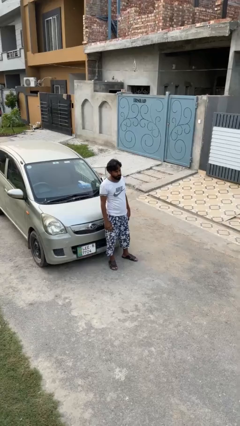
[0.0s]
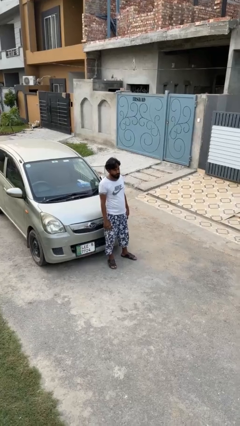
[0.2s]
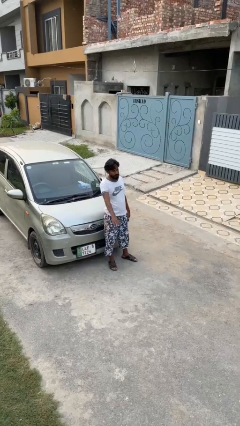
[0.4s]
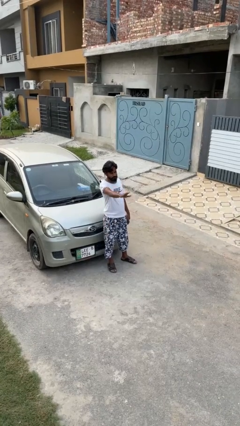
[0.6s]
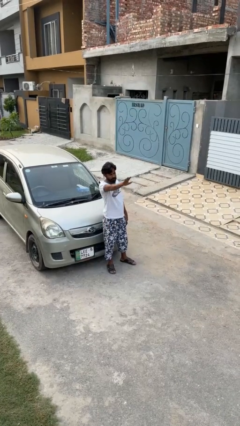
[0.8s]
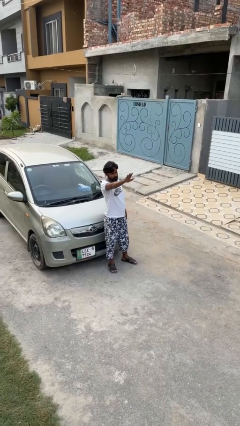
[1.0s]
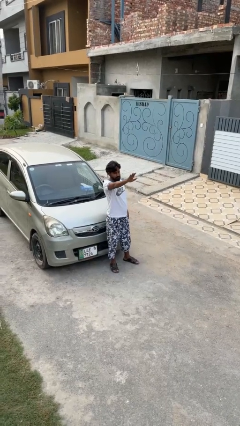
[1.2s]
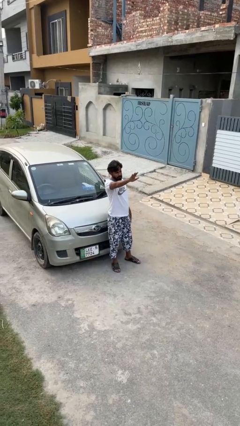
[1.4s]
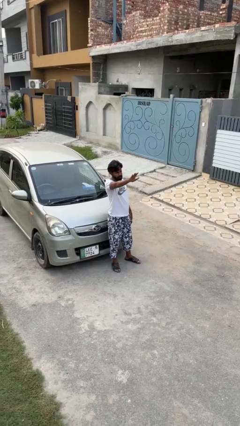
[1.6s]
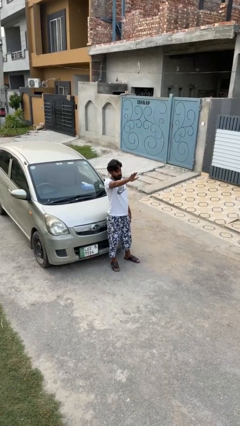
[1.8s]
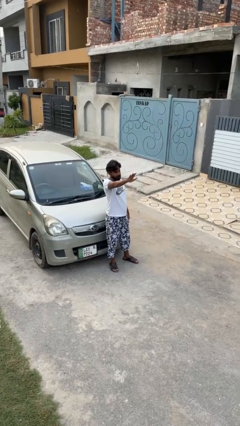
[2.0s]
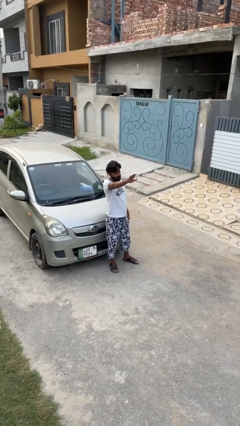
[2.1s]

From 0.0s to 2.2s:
person gestures raise hand

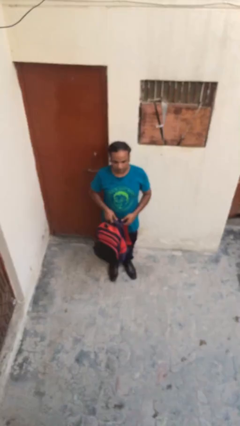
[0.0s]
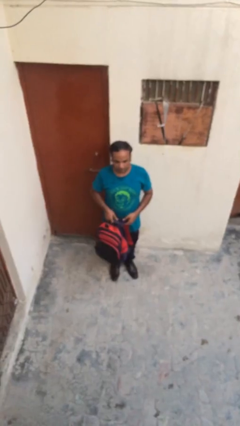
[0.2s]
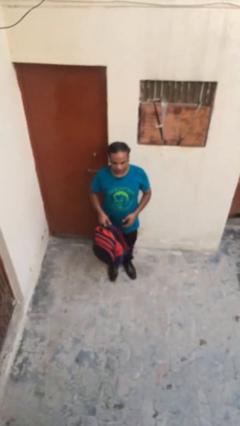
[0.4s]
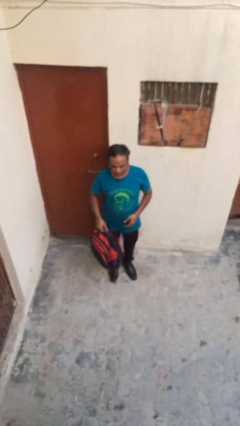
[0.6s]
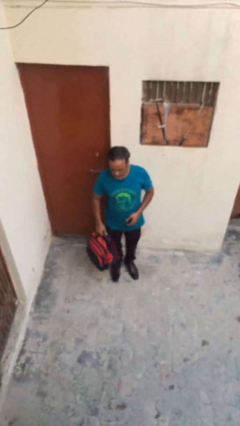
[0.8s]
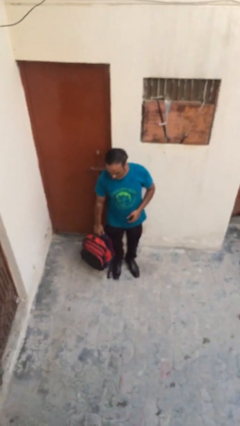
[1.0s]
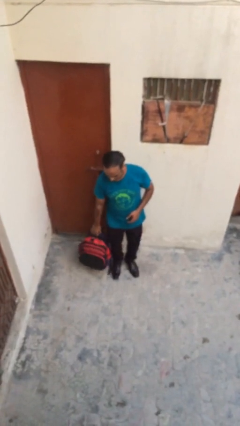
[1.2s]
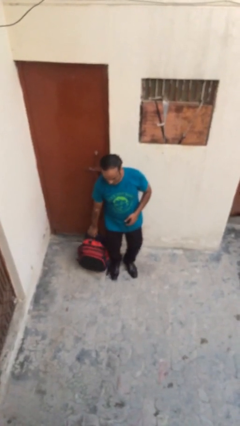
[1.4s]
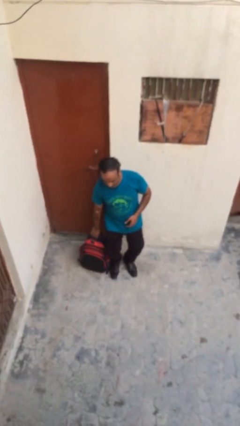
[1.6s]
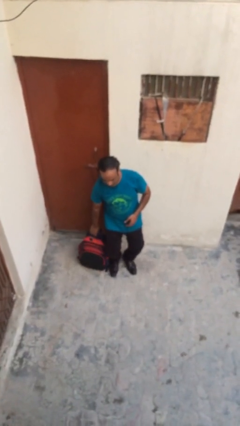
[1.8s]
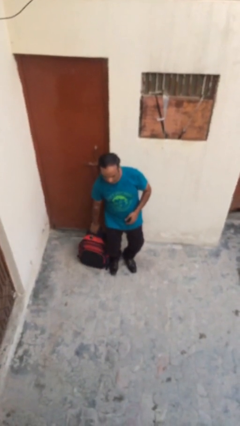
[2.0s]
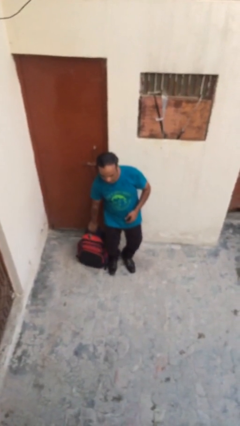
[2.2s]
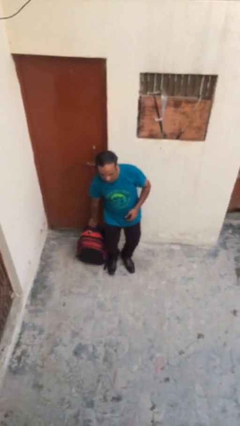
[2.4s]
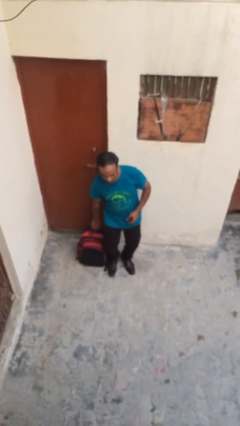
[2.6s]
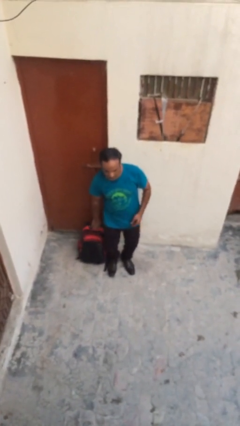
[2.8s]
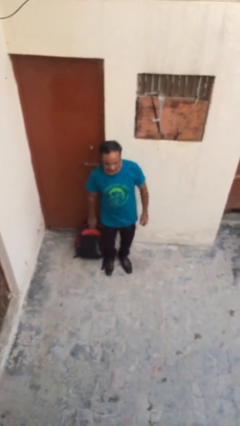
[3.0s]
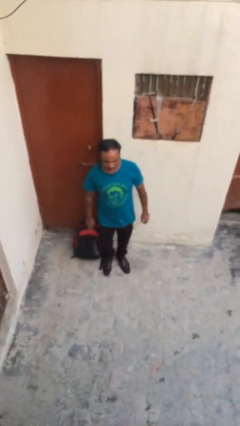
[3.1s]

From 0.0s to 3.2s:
person puts down object on floor

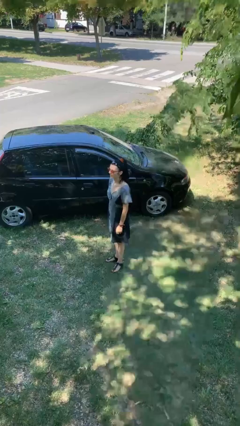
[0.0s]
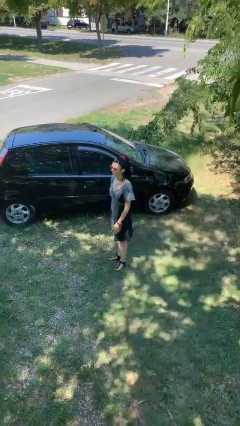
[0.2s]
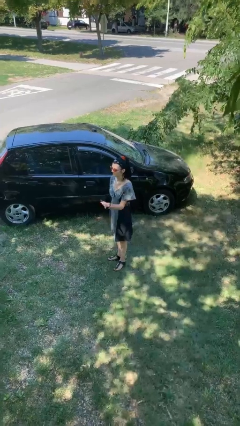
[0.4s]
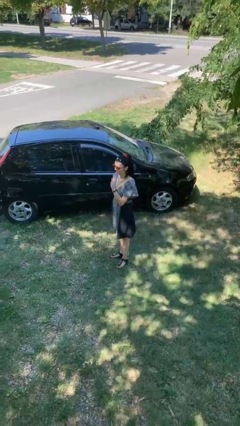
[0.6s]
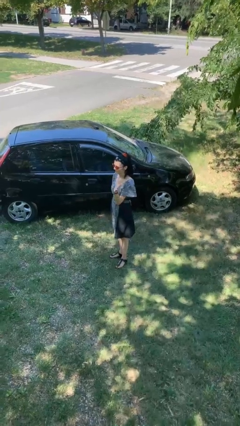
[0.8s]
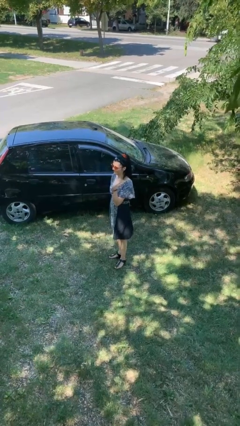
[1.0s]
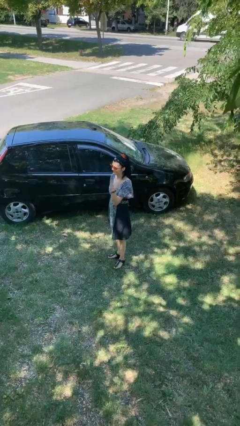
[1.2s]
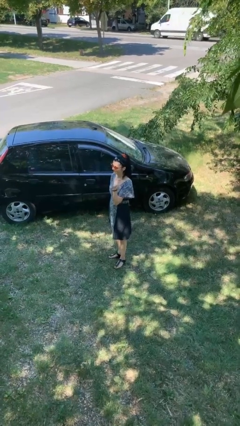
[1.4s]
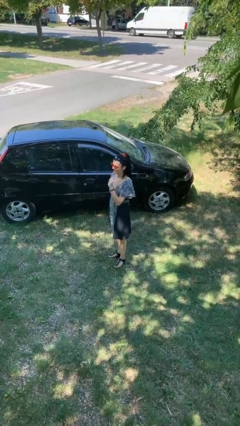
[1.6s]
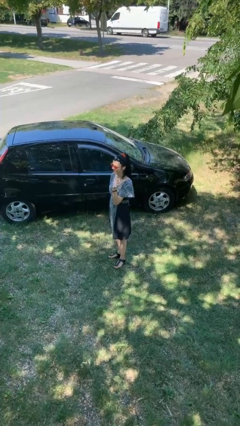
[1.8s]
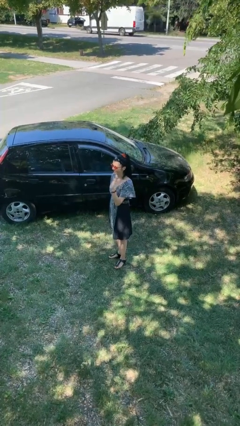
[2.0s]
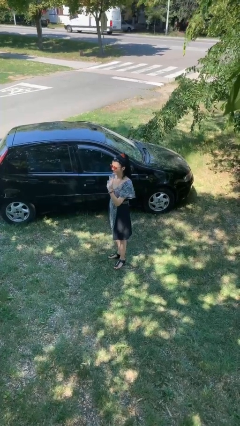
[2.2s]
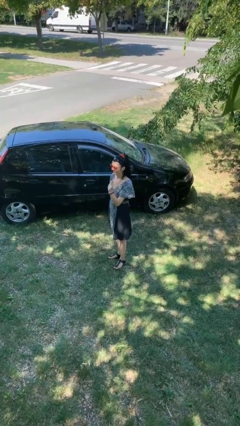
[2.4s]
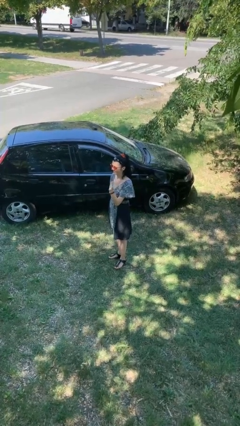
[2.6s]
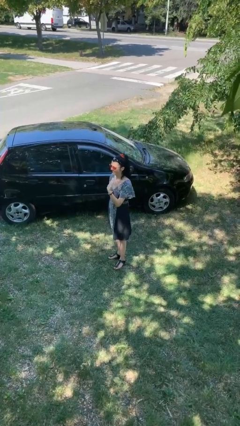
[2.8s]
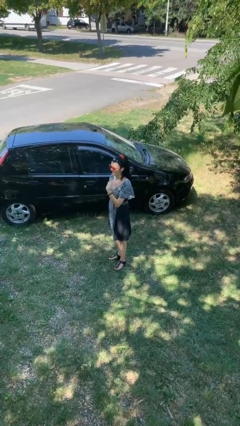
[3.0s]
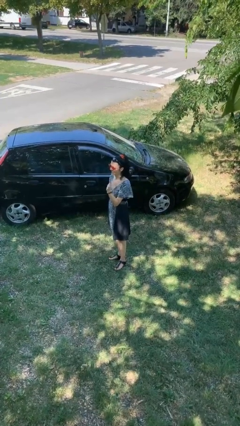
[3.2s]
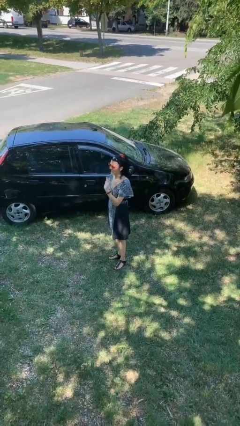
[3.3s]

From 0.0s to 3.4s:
person waves at person

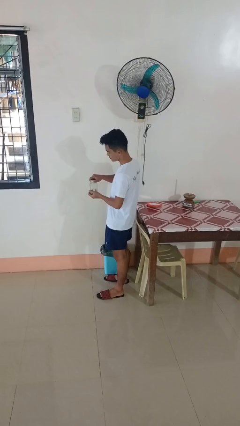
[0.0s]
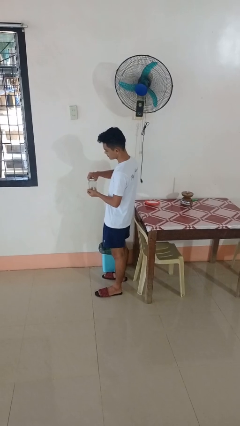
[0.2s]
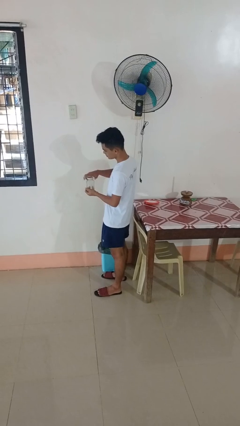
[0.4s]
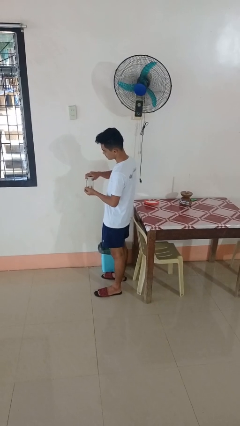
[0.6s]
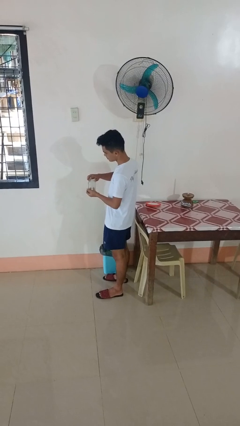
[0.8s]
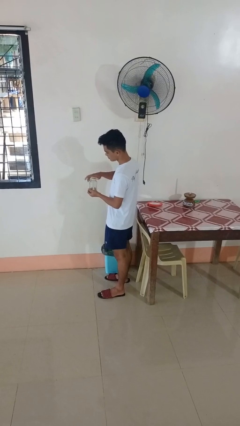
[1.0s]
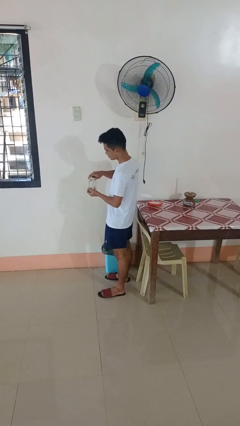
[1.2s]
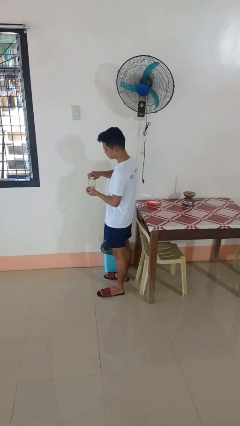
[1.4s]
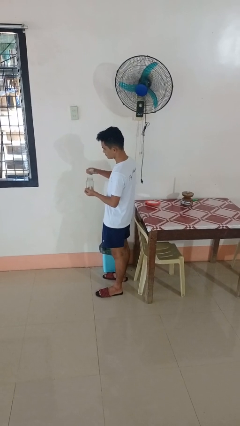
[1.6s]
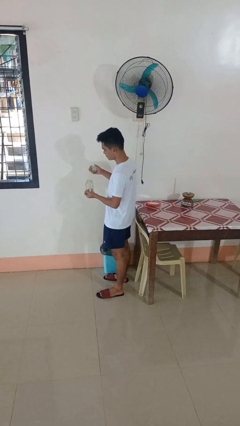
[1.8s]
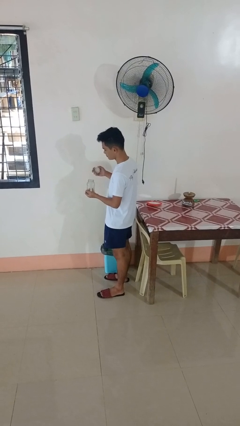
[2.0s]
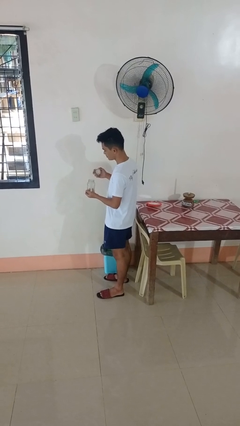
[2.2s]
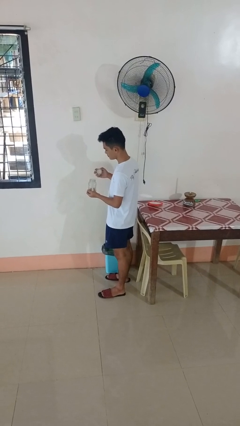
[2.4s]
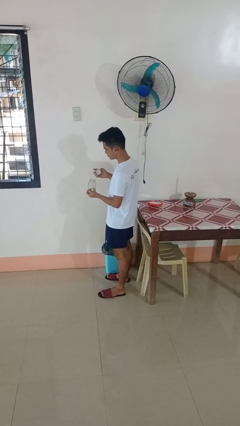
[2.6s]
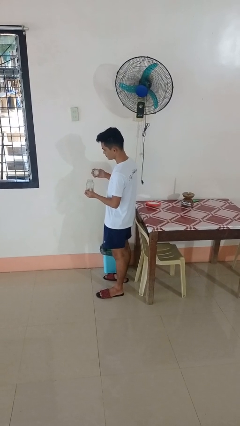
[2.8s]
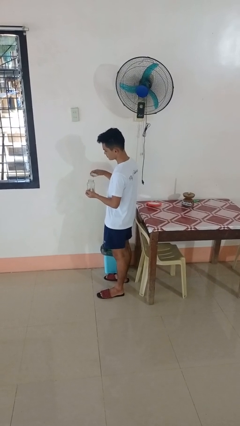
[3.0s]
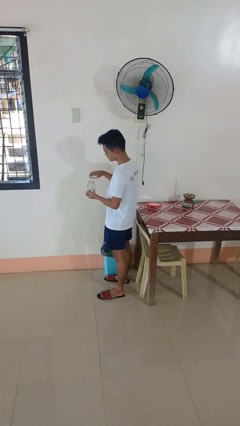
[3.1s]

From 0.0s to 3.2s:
person opens jar

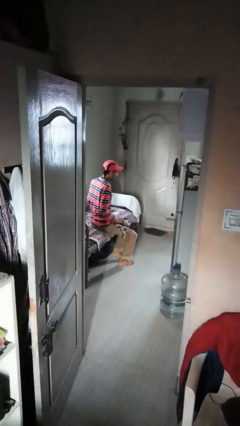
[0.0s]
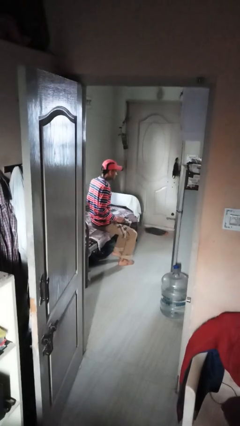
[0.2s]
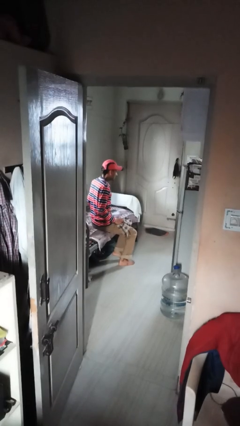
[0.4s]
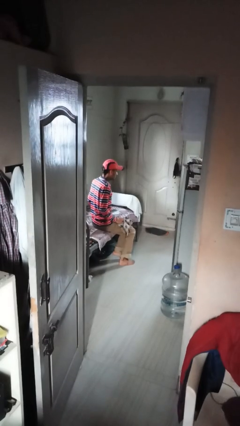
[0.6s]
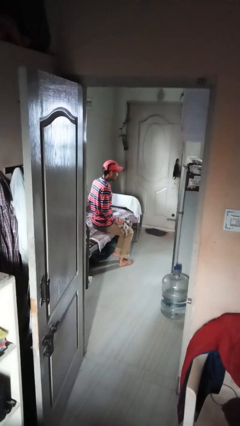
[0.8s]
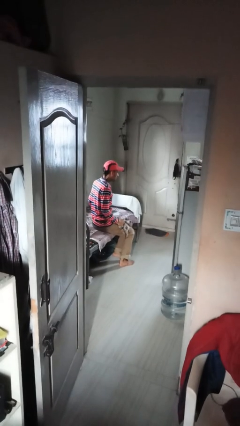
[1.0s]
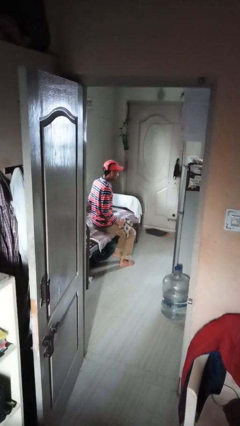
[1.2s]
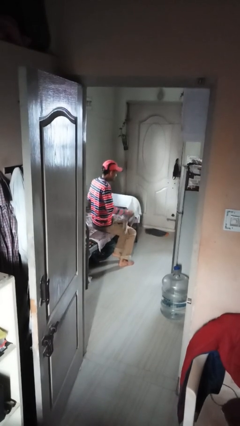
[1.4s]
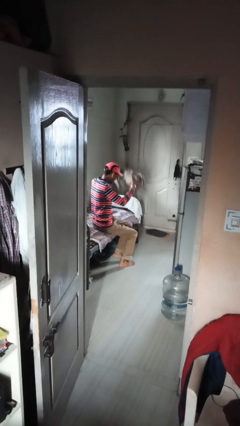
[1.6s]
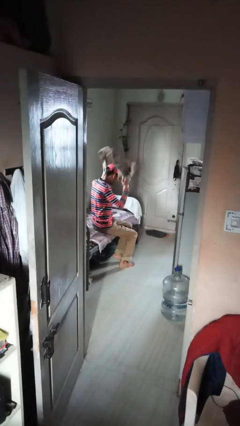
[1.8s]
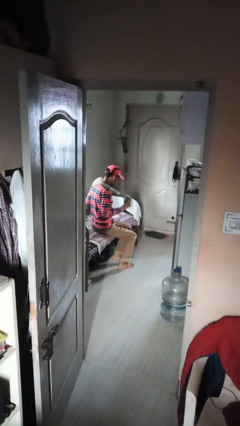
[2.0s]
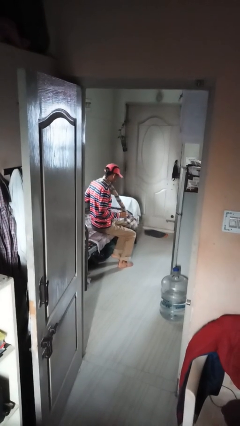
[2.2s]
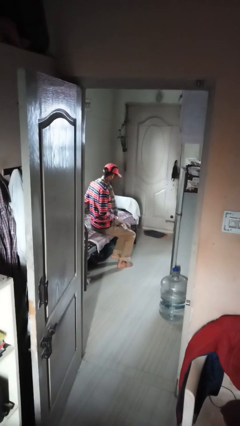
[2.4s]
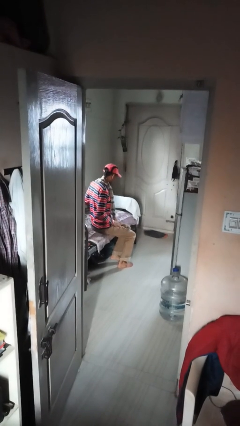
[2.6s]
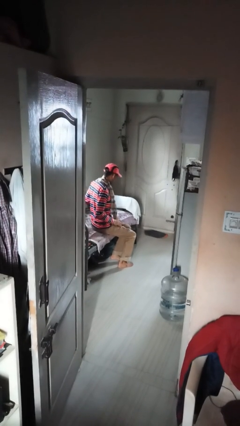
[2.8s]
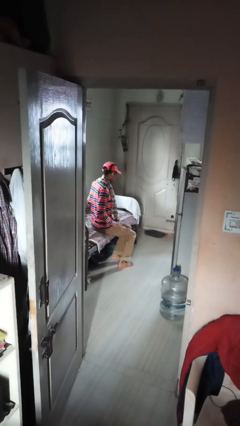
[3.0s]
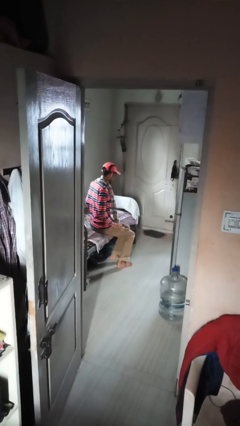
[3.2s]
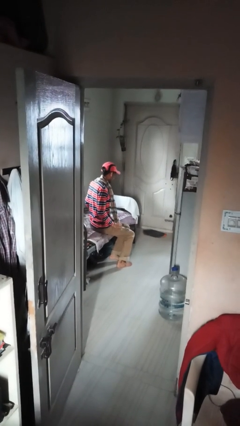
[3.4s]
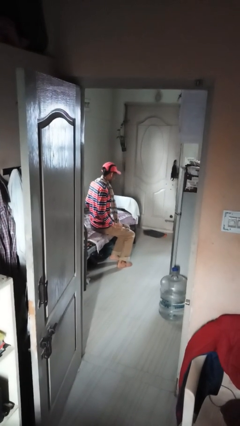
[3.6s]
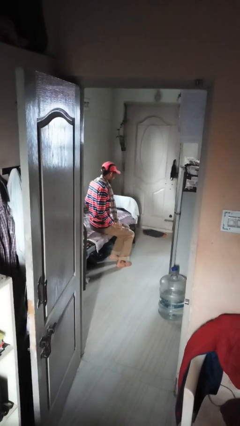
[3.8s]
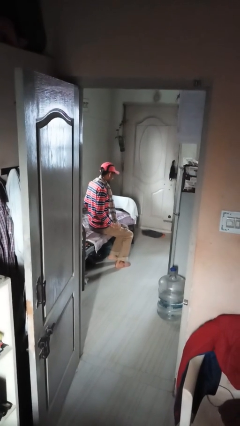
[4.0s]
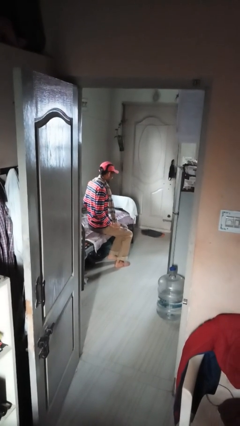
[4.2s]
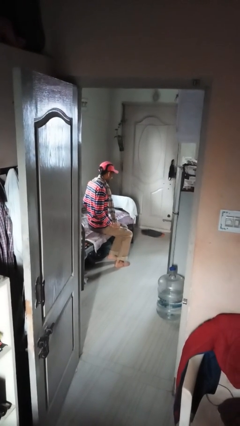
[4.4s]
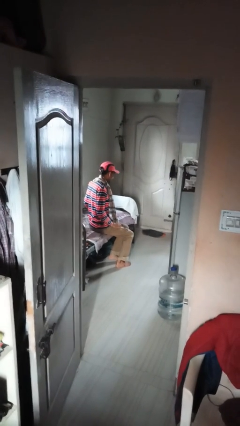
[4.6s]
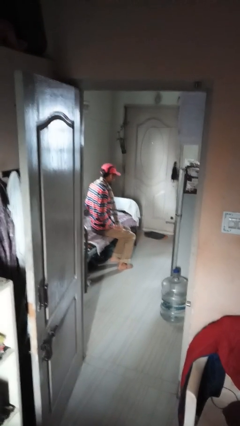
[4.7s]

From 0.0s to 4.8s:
person puts on scarf

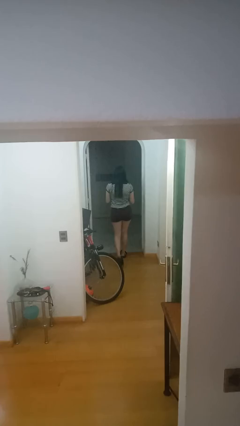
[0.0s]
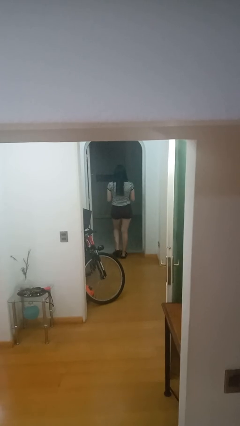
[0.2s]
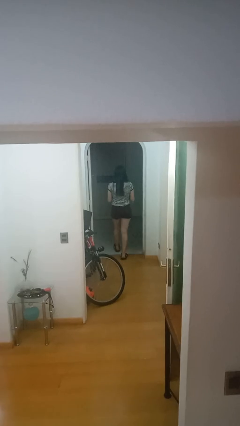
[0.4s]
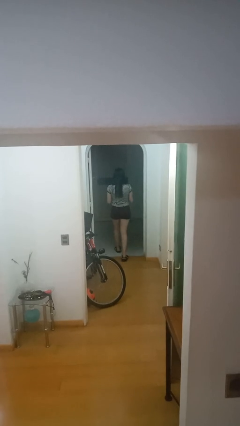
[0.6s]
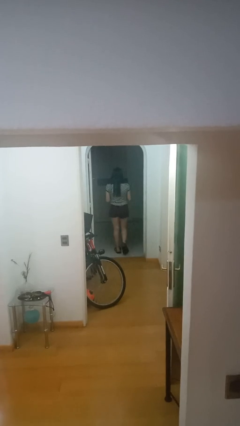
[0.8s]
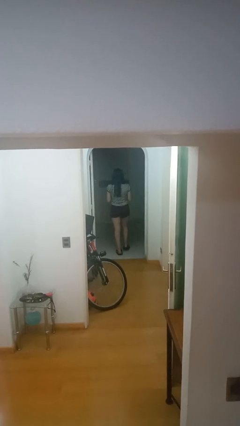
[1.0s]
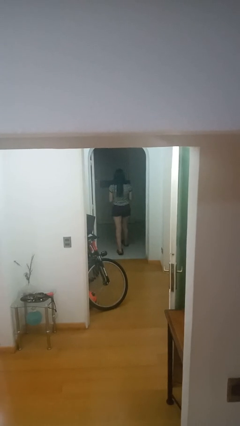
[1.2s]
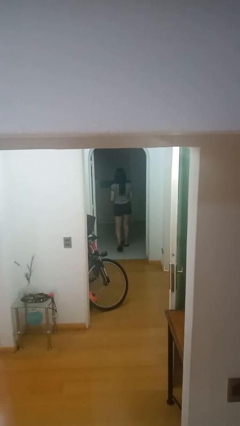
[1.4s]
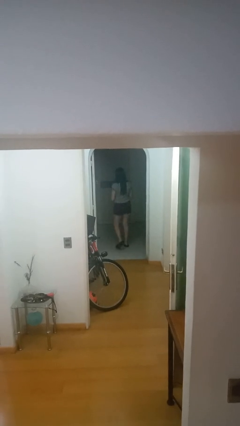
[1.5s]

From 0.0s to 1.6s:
person exits scene through structure
